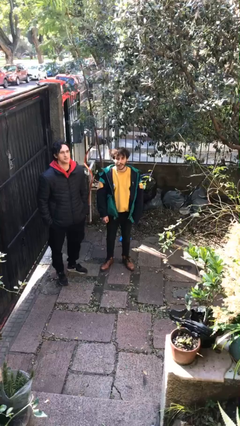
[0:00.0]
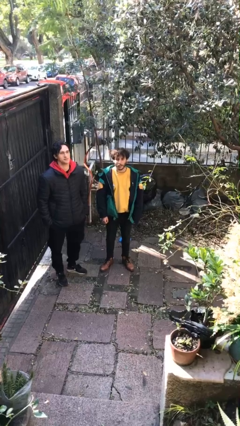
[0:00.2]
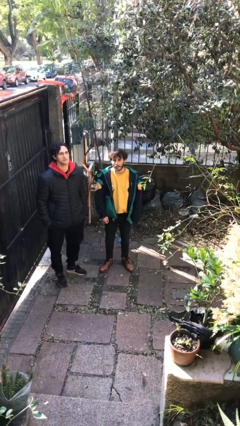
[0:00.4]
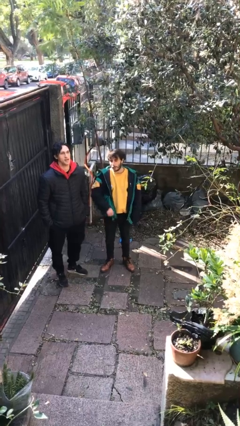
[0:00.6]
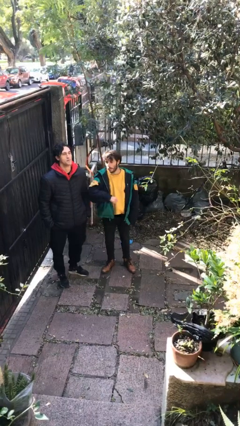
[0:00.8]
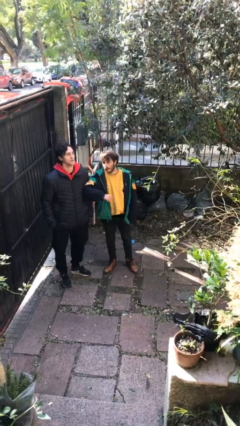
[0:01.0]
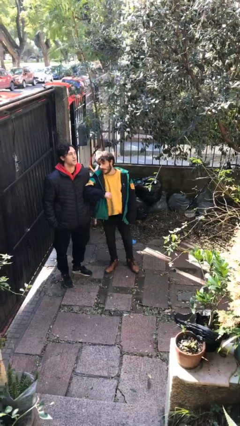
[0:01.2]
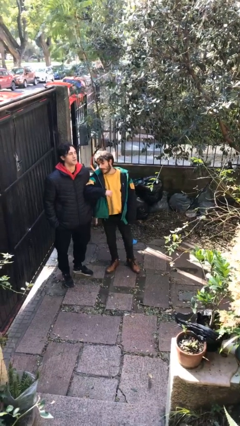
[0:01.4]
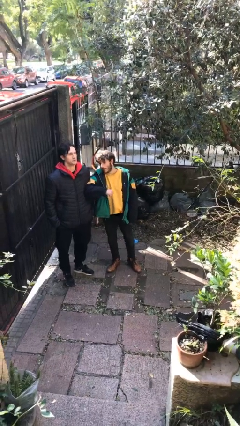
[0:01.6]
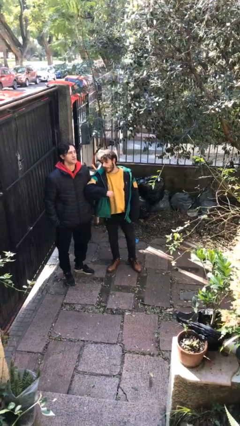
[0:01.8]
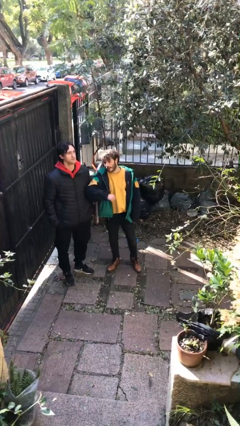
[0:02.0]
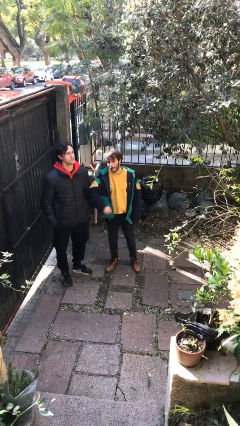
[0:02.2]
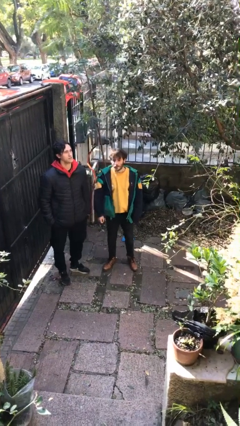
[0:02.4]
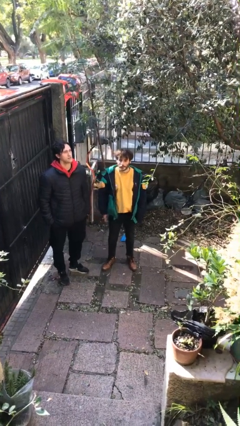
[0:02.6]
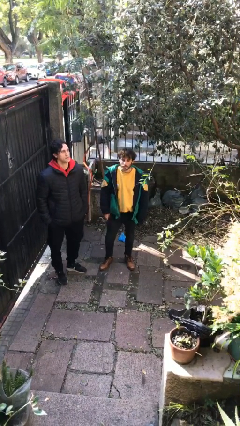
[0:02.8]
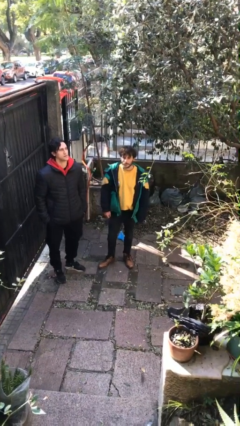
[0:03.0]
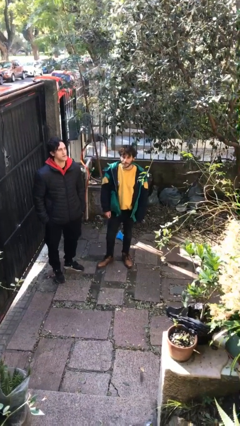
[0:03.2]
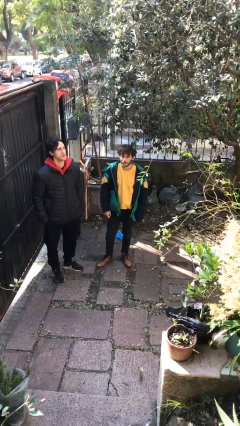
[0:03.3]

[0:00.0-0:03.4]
person nudges person with elbow

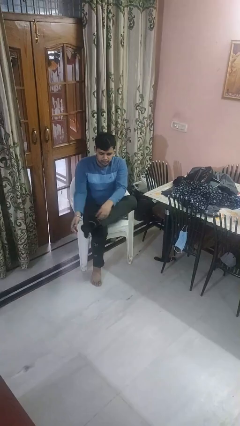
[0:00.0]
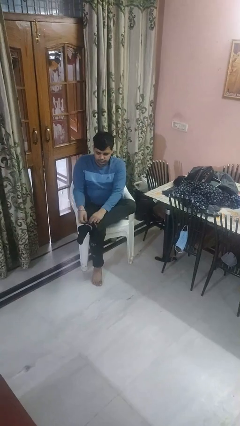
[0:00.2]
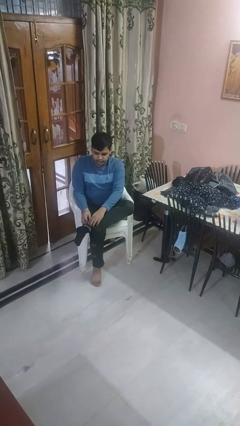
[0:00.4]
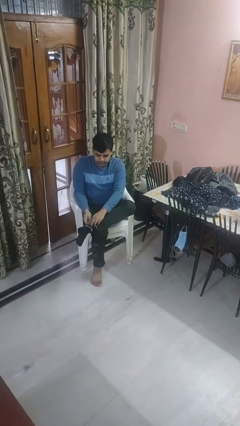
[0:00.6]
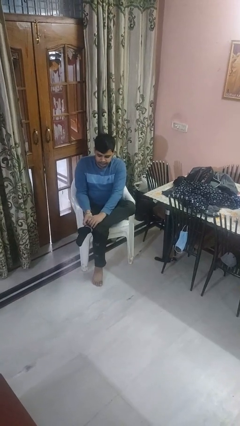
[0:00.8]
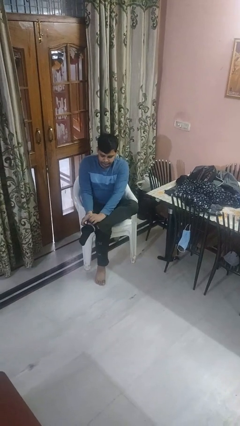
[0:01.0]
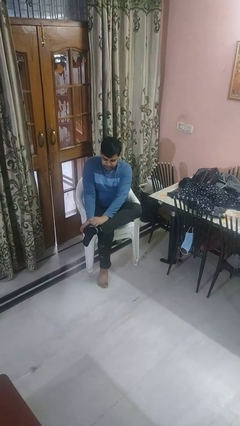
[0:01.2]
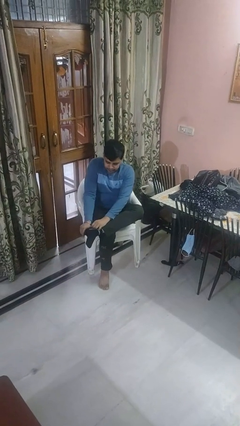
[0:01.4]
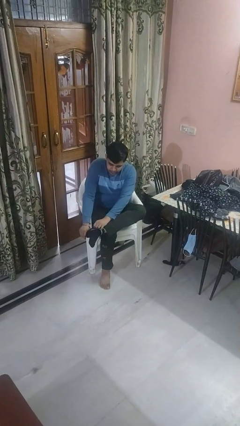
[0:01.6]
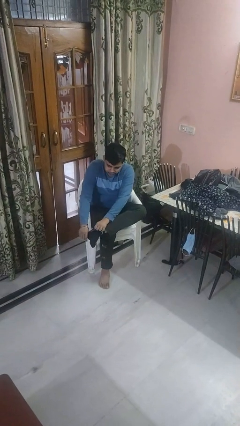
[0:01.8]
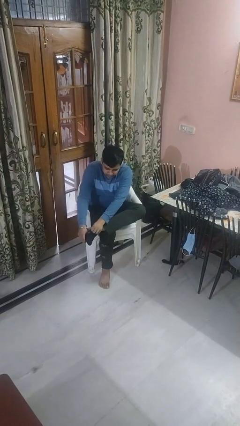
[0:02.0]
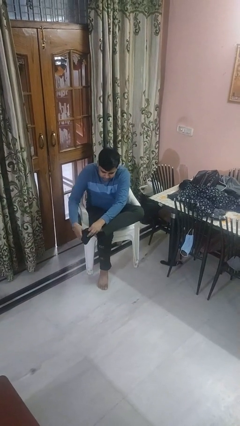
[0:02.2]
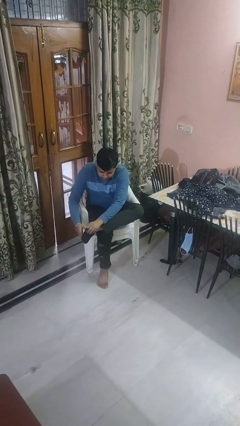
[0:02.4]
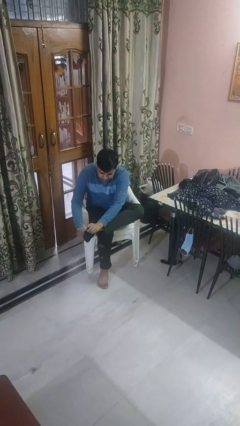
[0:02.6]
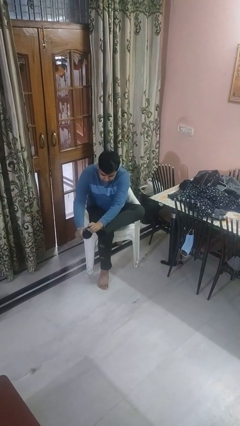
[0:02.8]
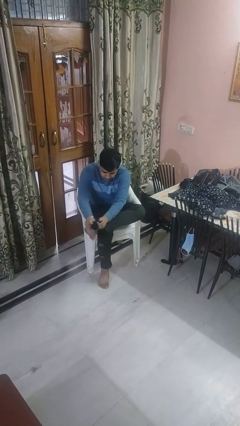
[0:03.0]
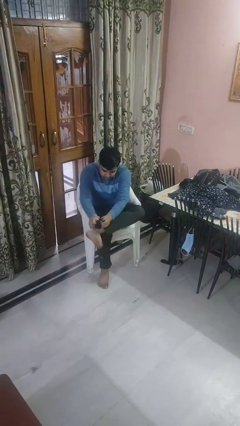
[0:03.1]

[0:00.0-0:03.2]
person takes off socks

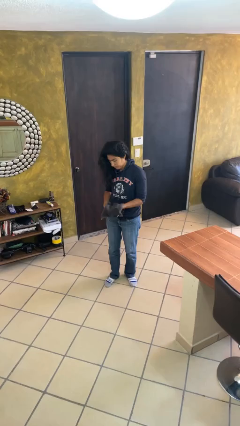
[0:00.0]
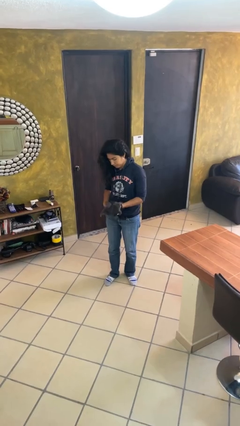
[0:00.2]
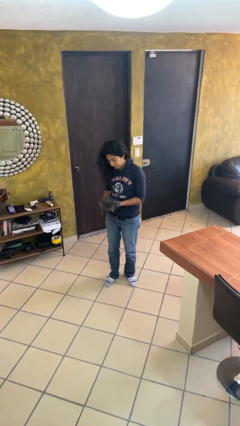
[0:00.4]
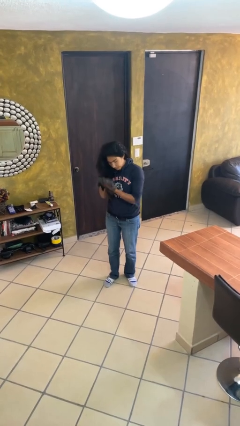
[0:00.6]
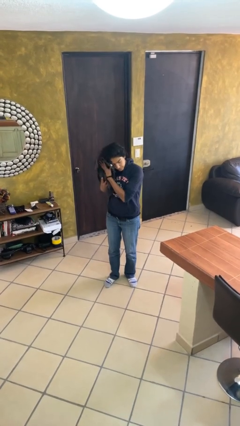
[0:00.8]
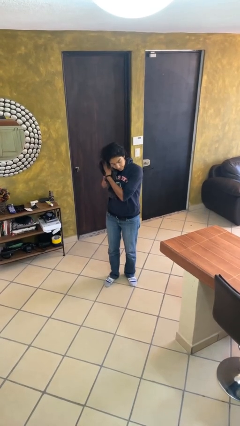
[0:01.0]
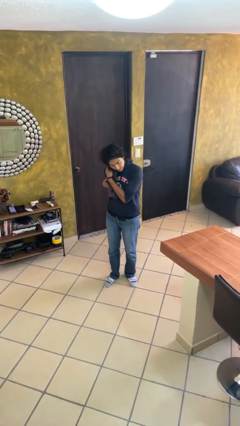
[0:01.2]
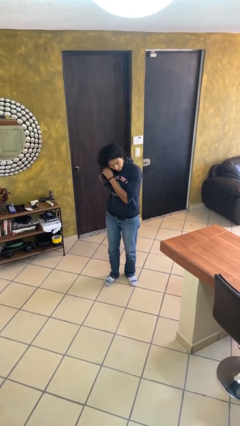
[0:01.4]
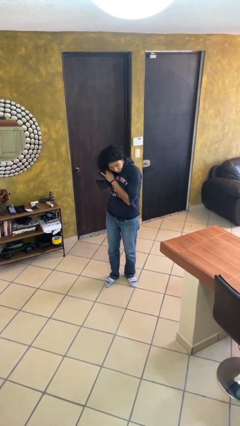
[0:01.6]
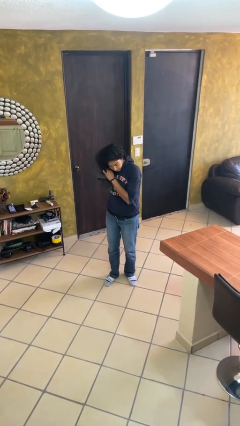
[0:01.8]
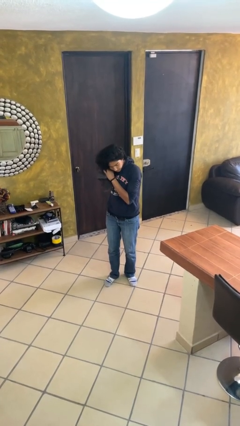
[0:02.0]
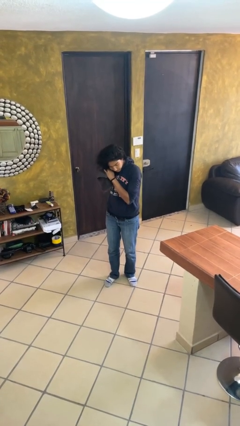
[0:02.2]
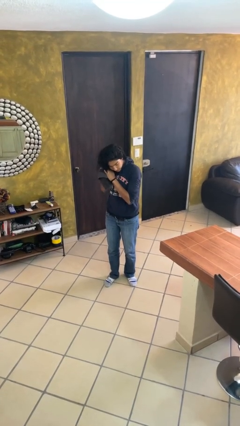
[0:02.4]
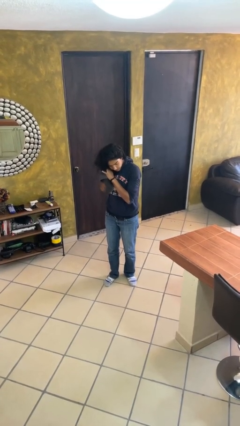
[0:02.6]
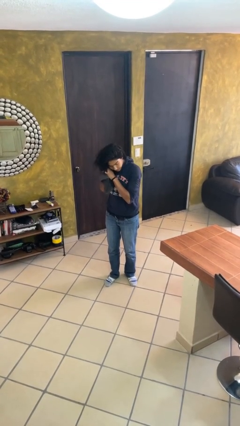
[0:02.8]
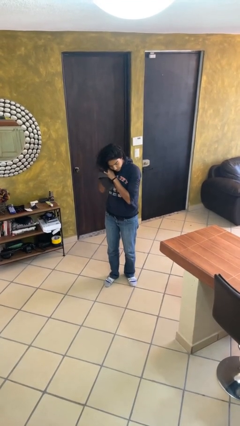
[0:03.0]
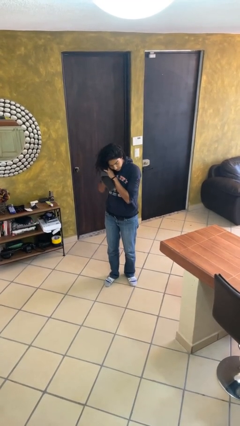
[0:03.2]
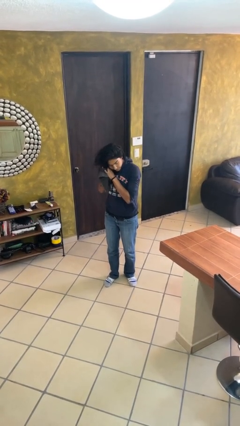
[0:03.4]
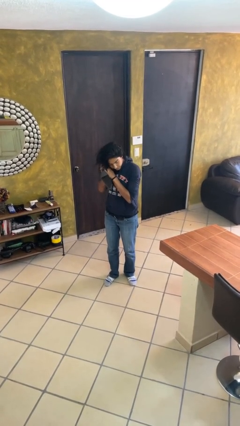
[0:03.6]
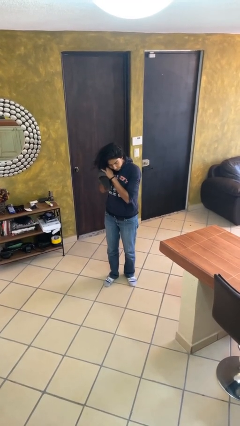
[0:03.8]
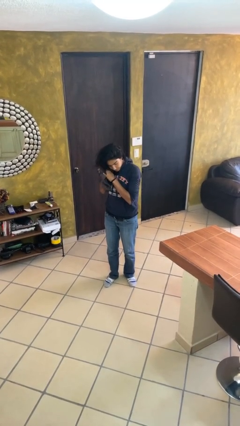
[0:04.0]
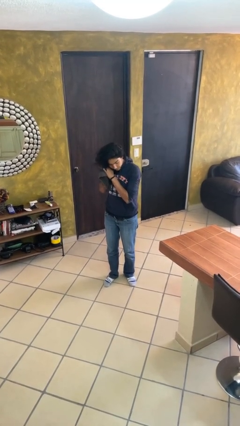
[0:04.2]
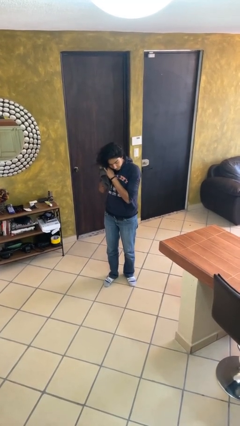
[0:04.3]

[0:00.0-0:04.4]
person dries hair with towel

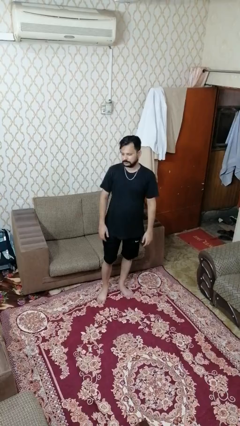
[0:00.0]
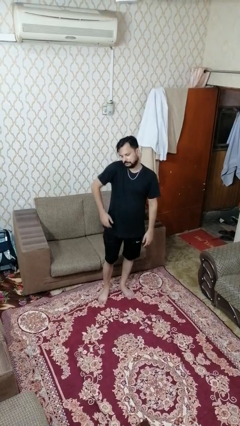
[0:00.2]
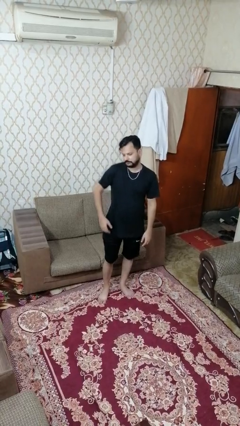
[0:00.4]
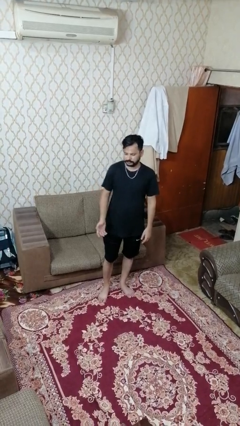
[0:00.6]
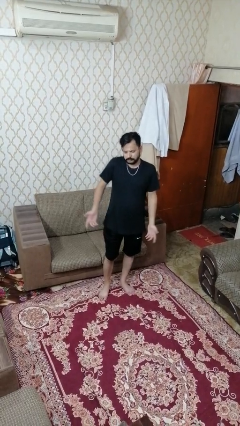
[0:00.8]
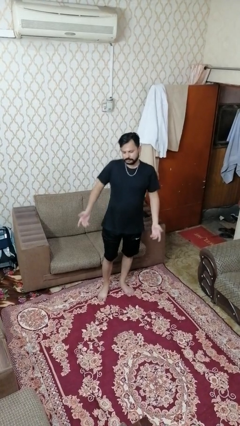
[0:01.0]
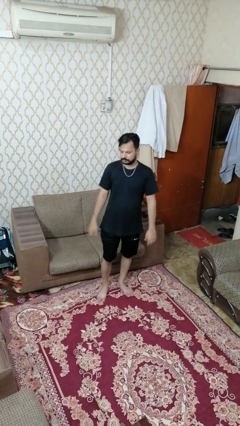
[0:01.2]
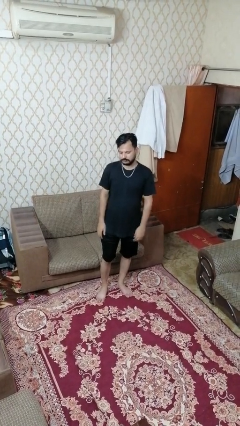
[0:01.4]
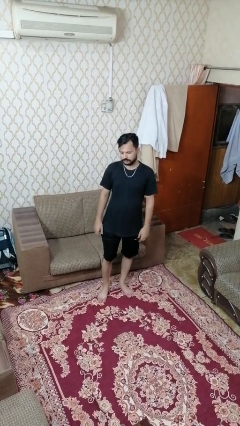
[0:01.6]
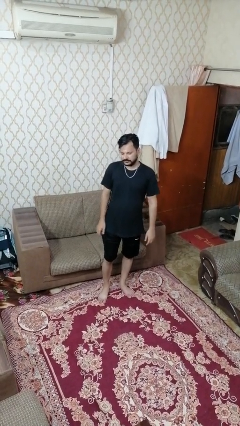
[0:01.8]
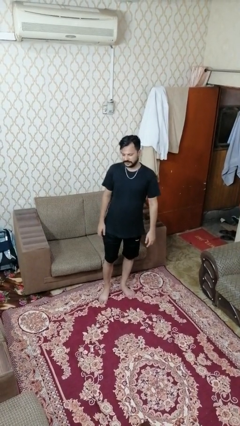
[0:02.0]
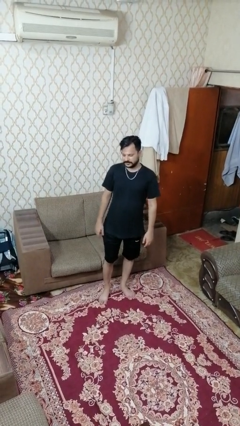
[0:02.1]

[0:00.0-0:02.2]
person shrugs

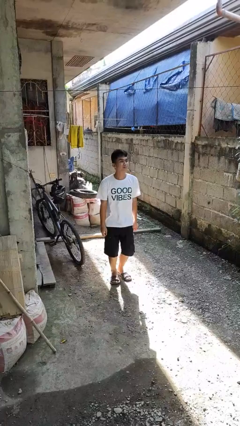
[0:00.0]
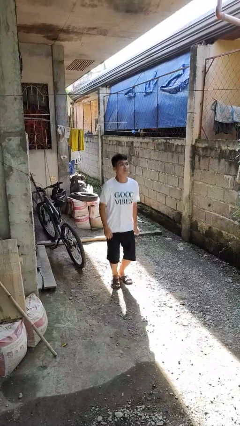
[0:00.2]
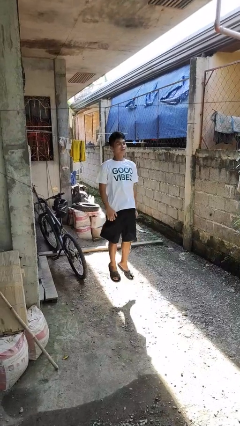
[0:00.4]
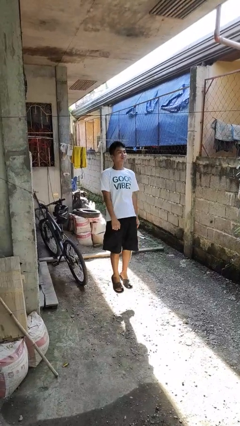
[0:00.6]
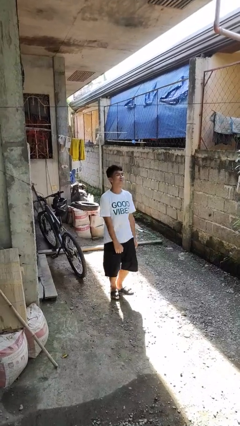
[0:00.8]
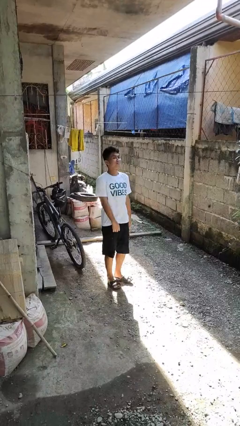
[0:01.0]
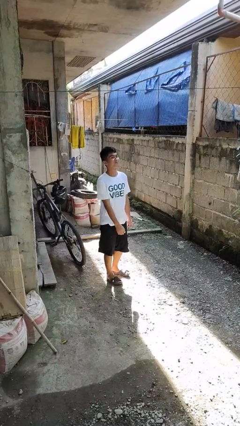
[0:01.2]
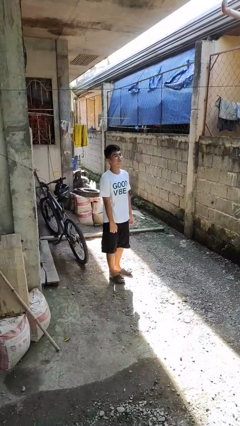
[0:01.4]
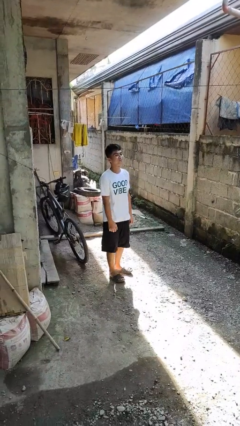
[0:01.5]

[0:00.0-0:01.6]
person jumps

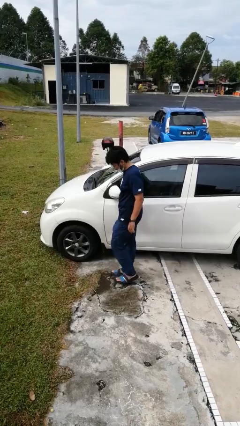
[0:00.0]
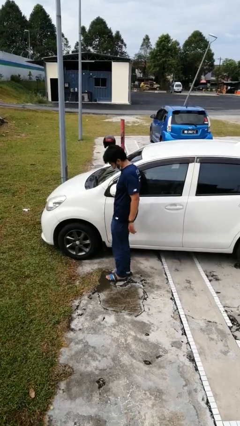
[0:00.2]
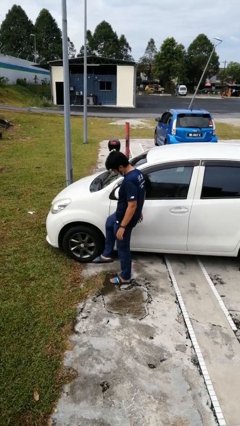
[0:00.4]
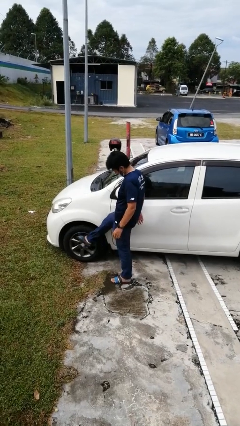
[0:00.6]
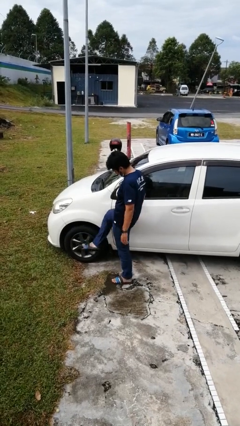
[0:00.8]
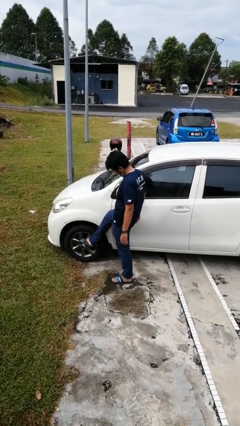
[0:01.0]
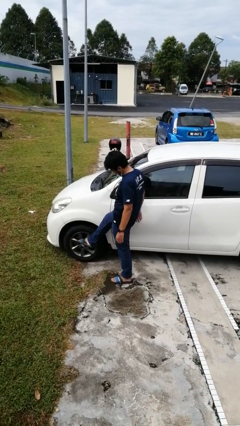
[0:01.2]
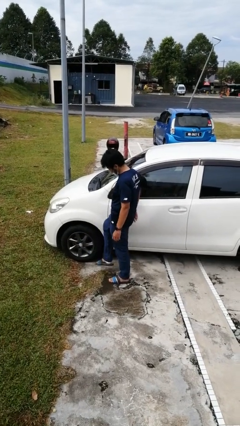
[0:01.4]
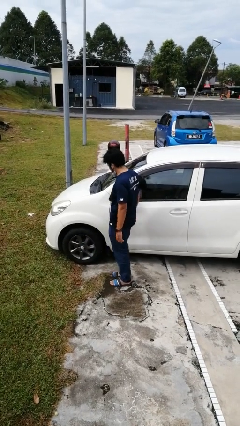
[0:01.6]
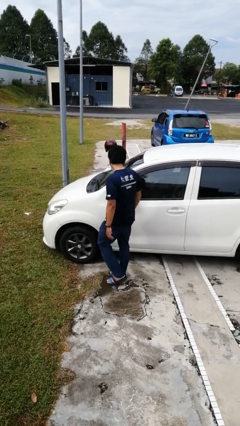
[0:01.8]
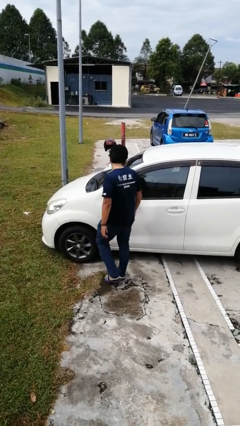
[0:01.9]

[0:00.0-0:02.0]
person kicks car tires

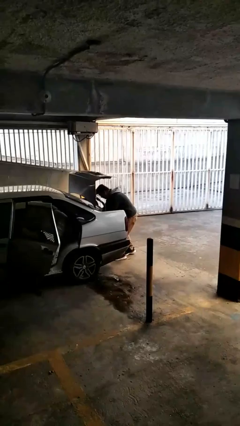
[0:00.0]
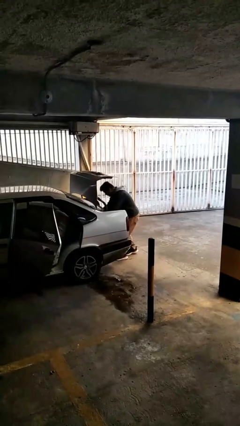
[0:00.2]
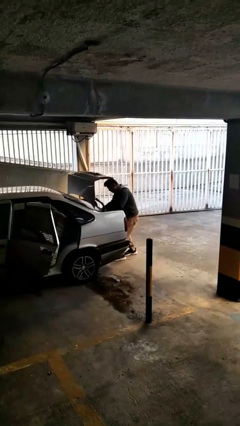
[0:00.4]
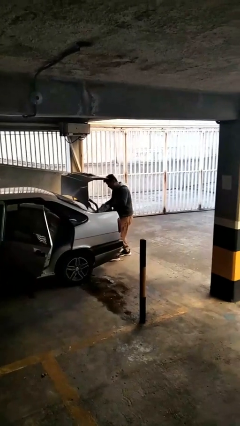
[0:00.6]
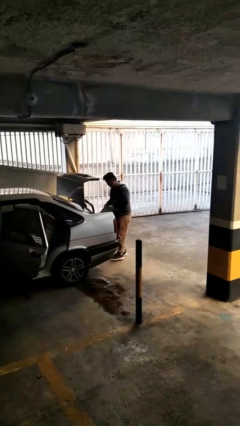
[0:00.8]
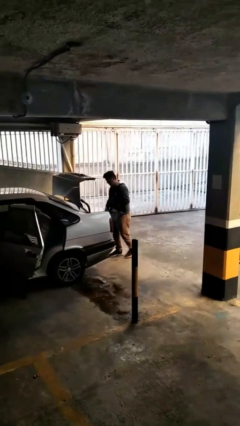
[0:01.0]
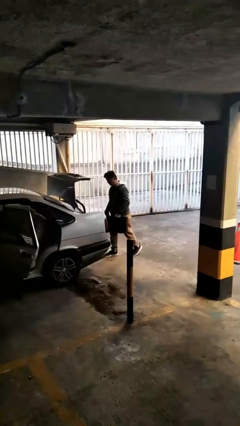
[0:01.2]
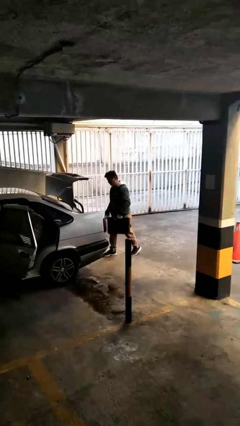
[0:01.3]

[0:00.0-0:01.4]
person unloads car
